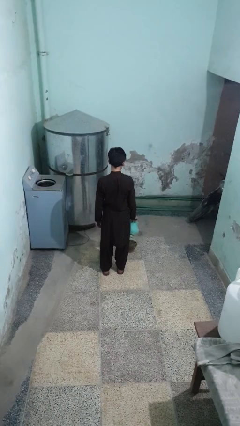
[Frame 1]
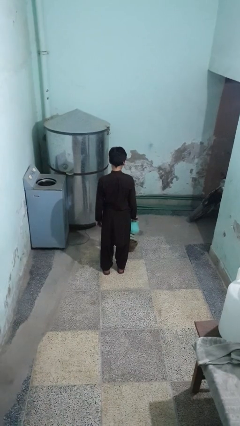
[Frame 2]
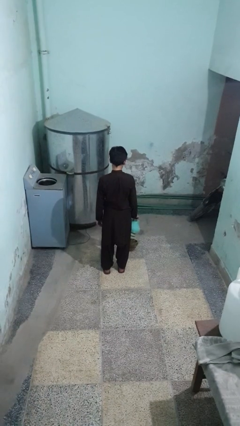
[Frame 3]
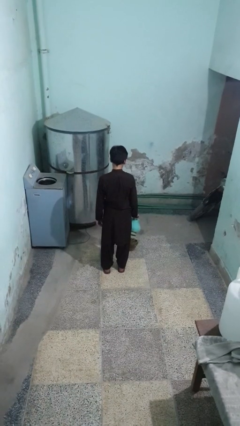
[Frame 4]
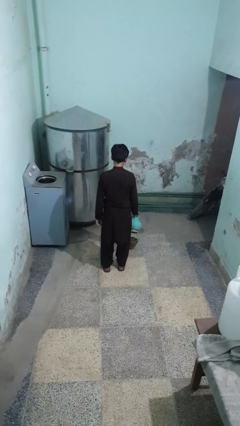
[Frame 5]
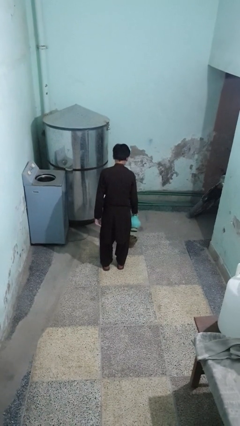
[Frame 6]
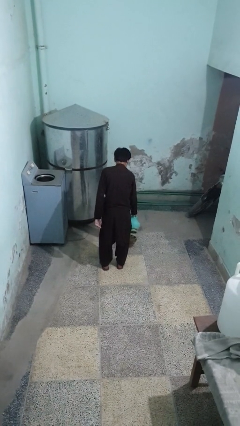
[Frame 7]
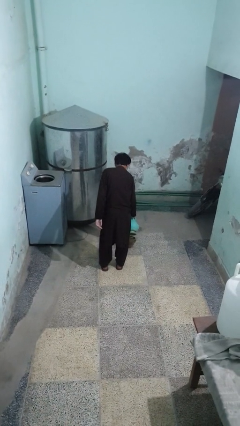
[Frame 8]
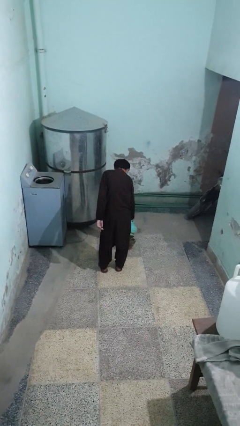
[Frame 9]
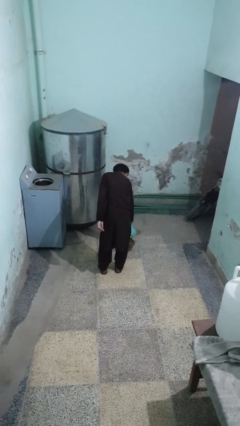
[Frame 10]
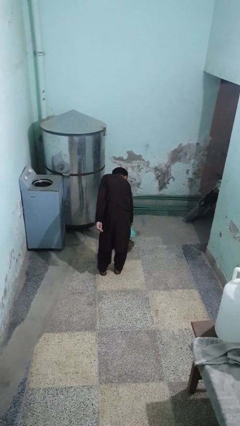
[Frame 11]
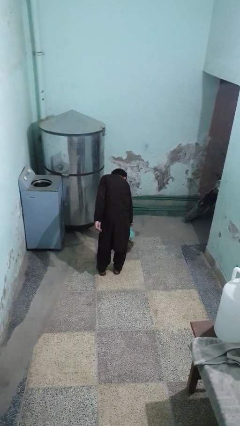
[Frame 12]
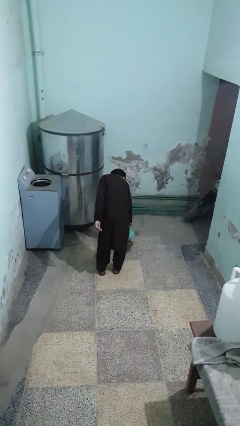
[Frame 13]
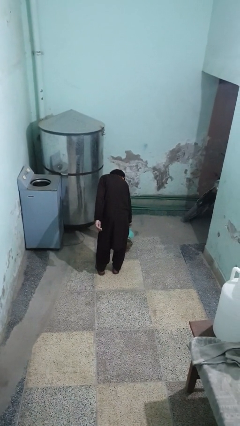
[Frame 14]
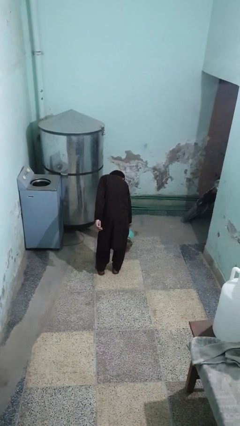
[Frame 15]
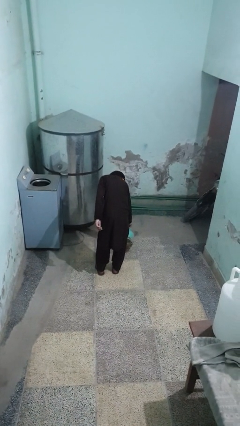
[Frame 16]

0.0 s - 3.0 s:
person waters houseplant

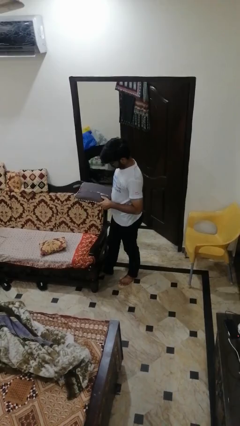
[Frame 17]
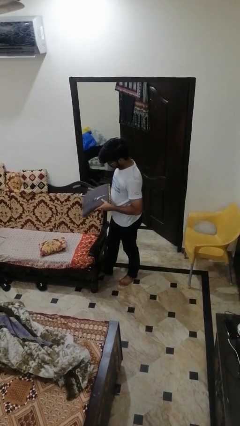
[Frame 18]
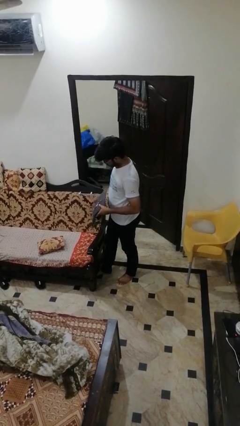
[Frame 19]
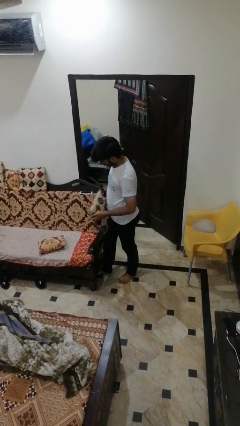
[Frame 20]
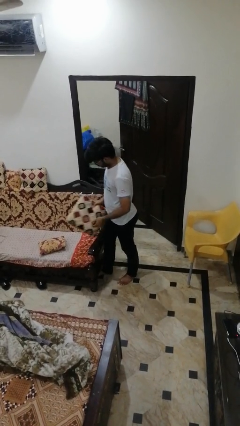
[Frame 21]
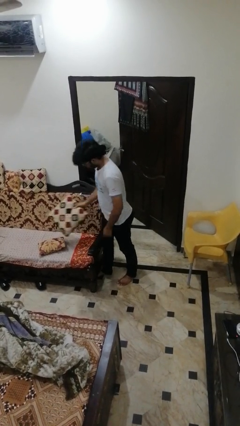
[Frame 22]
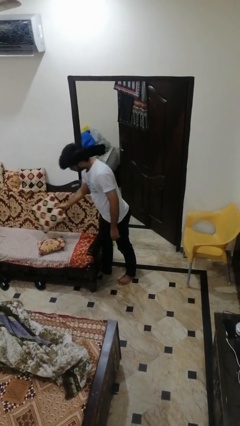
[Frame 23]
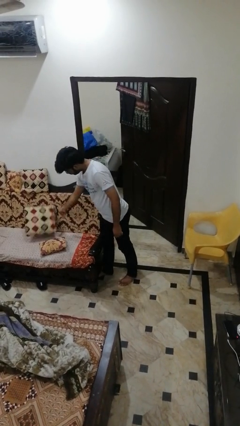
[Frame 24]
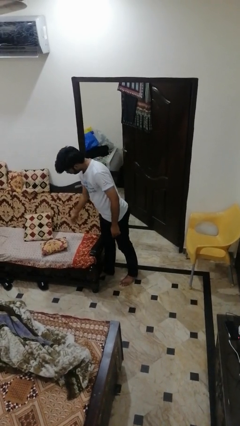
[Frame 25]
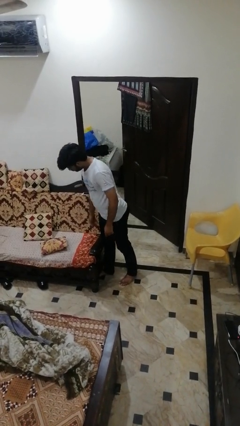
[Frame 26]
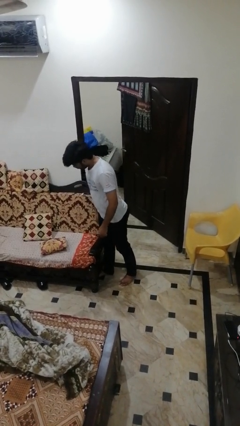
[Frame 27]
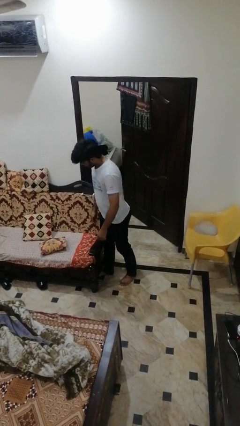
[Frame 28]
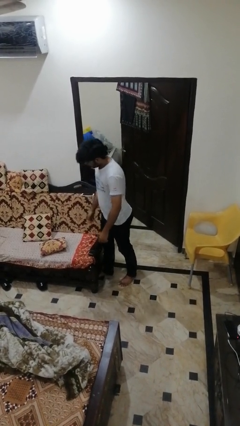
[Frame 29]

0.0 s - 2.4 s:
person puts down object on couch

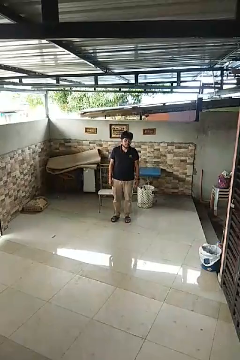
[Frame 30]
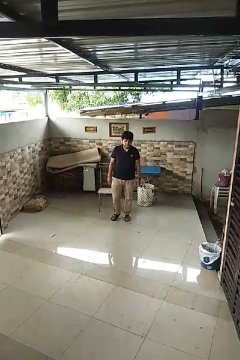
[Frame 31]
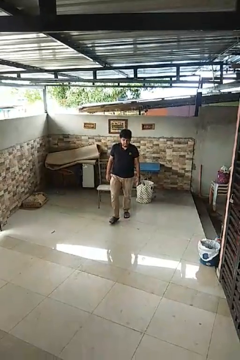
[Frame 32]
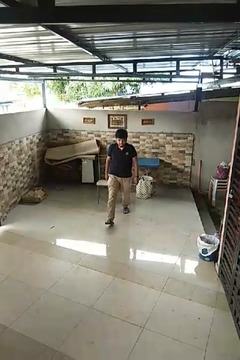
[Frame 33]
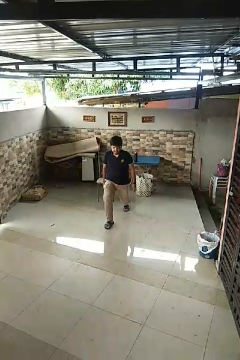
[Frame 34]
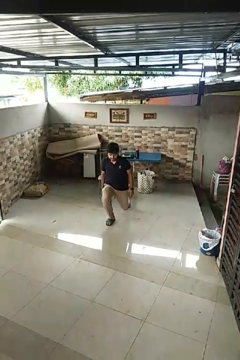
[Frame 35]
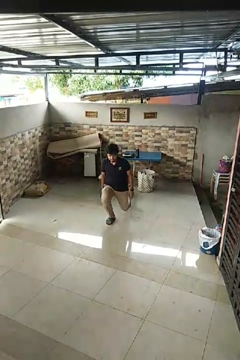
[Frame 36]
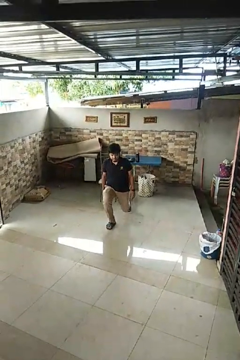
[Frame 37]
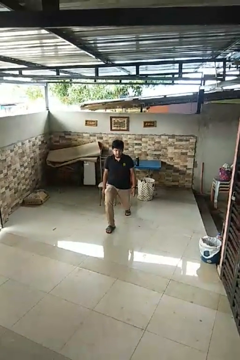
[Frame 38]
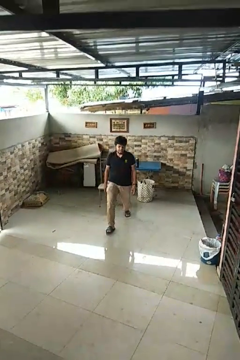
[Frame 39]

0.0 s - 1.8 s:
person exercises with lunges

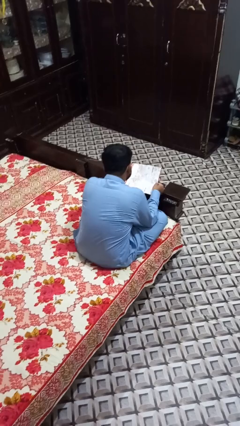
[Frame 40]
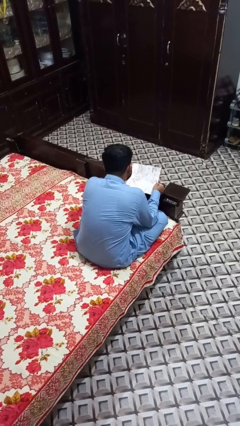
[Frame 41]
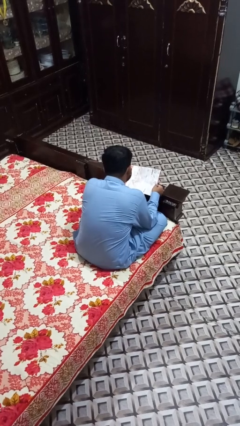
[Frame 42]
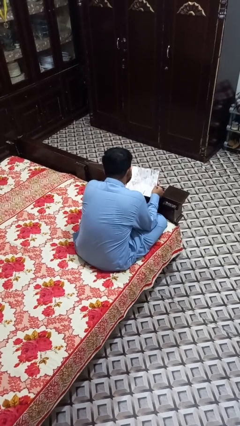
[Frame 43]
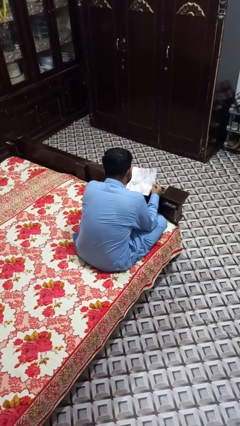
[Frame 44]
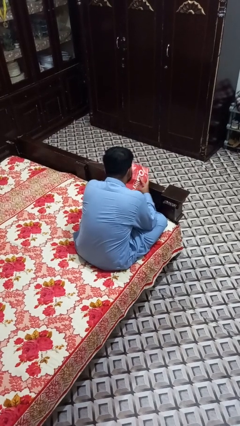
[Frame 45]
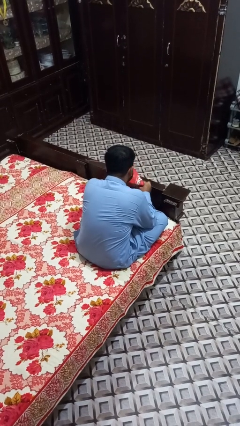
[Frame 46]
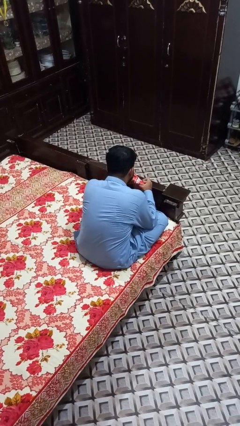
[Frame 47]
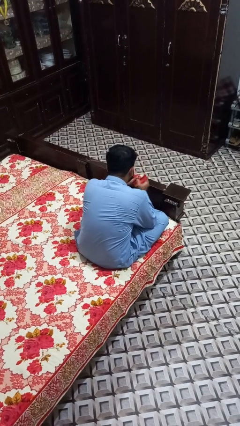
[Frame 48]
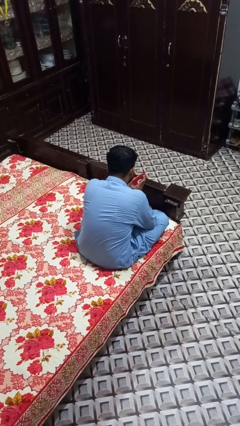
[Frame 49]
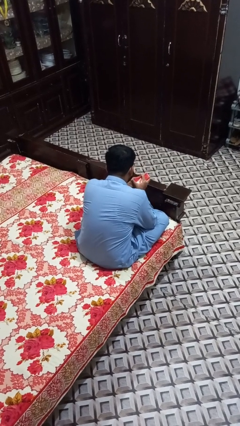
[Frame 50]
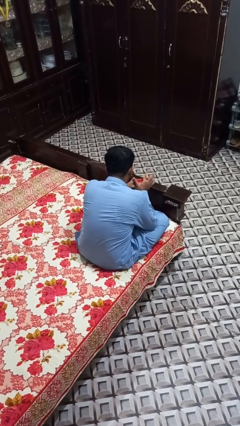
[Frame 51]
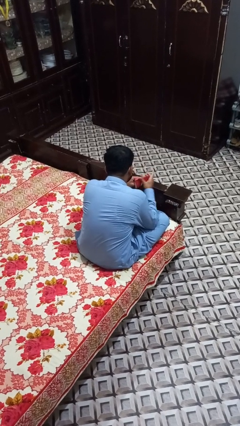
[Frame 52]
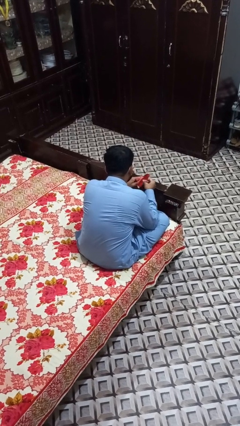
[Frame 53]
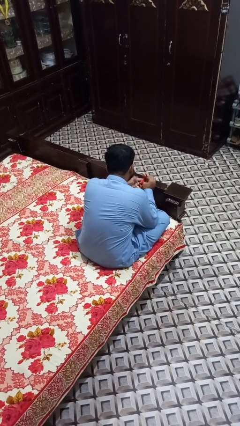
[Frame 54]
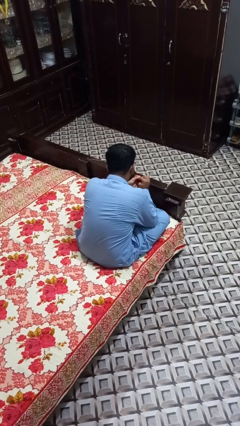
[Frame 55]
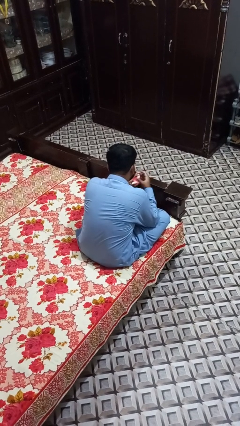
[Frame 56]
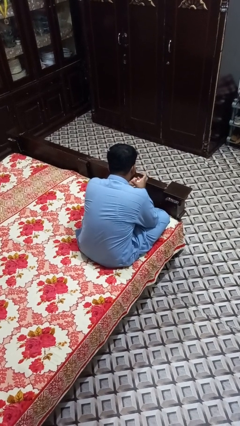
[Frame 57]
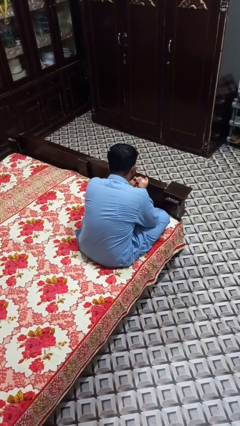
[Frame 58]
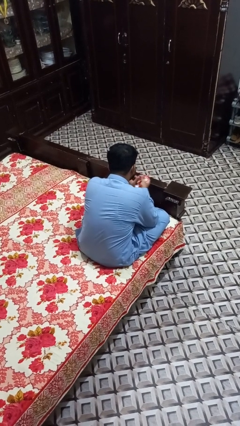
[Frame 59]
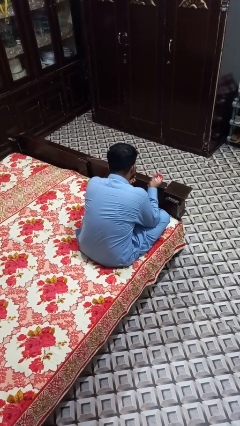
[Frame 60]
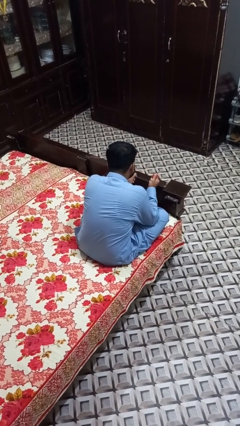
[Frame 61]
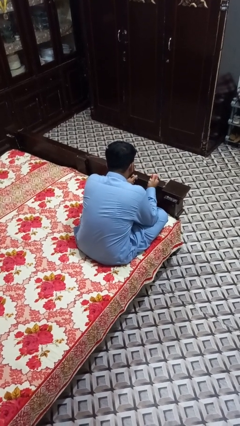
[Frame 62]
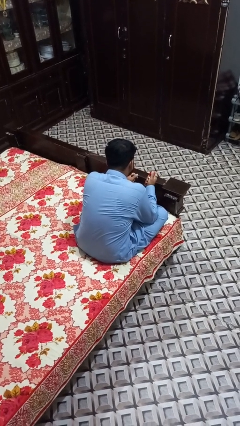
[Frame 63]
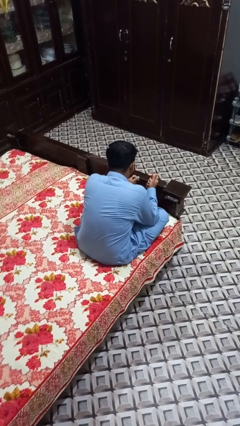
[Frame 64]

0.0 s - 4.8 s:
person crumples paper

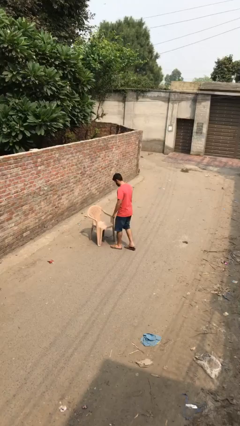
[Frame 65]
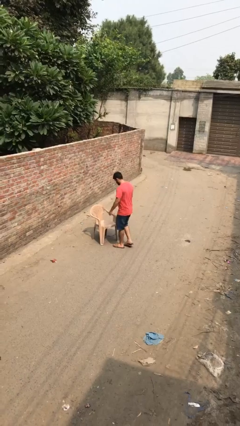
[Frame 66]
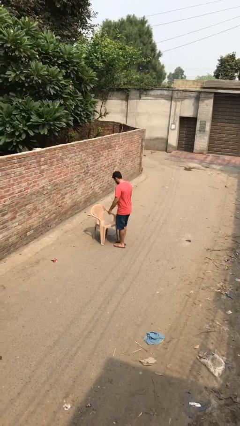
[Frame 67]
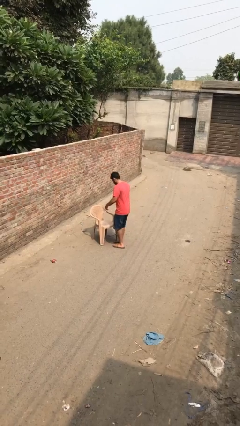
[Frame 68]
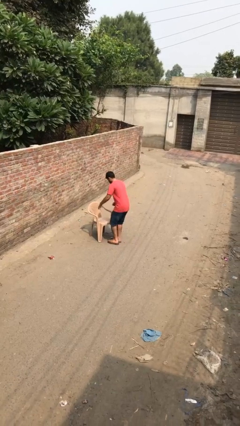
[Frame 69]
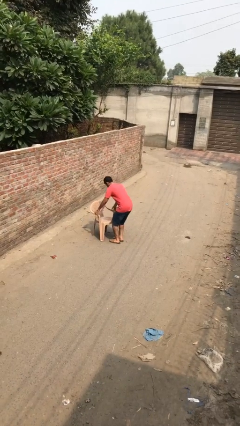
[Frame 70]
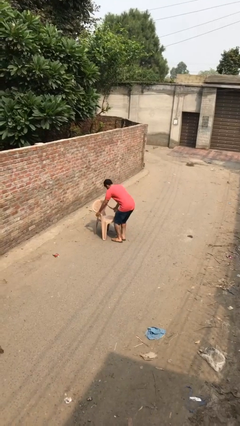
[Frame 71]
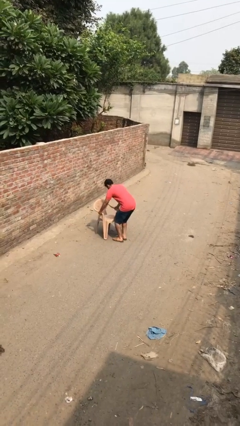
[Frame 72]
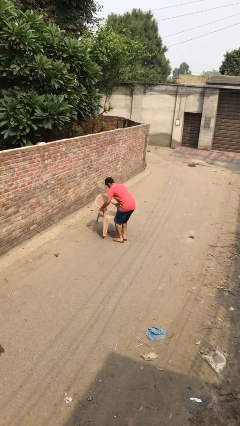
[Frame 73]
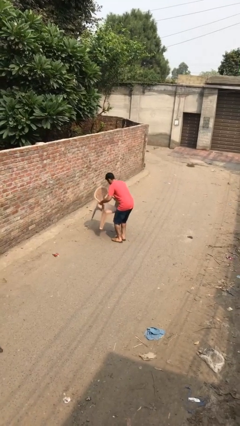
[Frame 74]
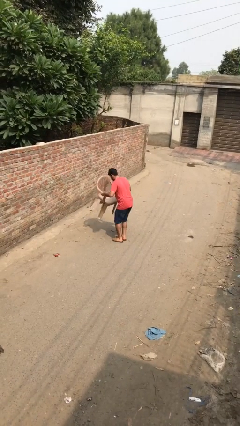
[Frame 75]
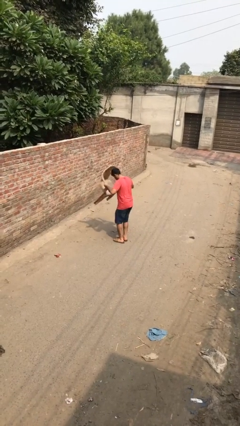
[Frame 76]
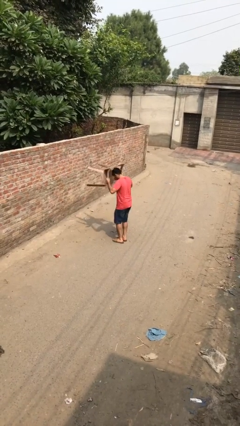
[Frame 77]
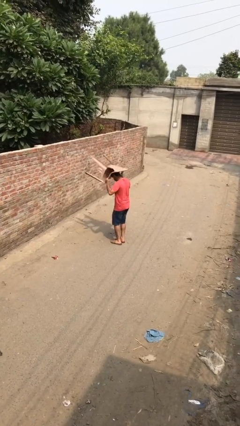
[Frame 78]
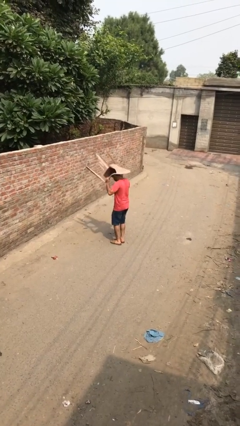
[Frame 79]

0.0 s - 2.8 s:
person picks up object from floor

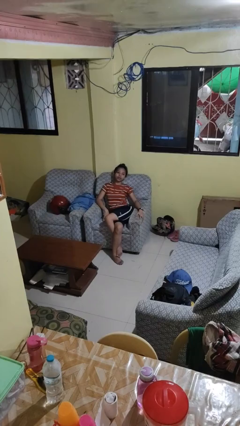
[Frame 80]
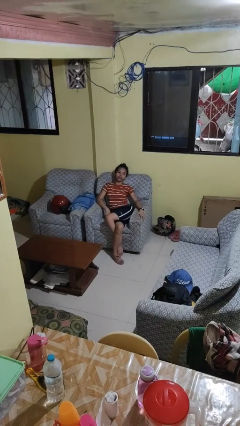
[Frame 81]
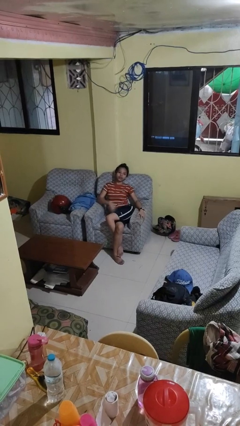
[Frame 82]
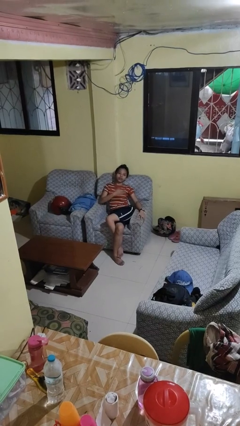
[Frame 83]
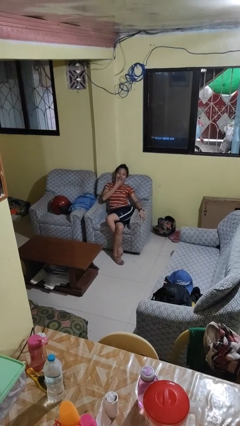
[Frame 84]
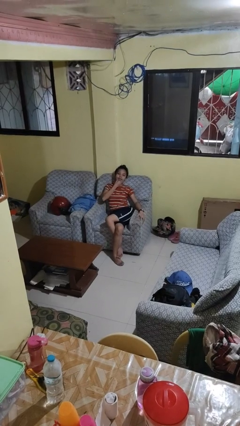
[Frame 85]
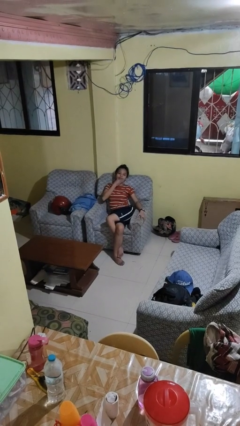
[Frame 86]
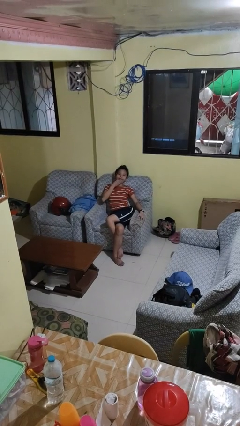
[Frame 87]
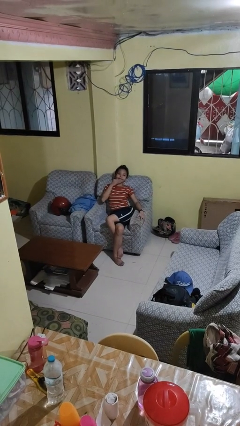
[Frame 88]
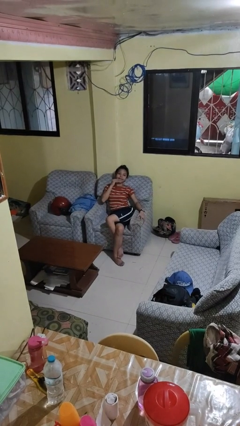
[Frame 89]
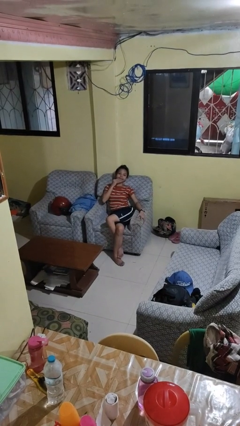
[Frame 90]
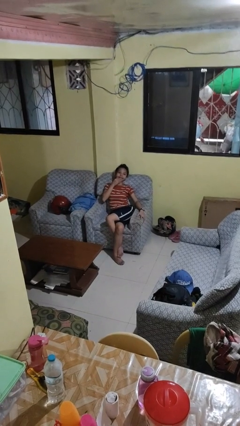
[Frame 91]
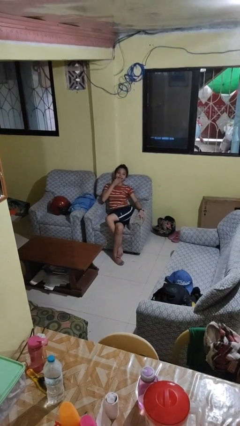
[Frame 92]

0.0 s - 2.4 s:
person strokes chin
